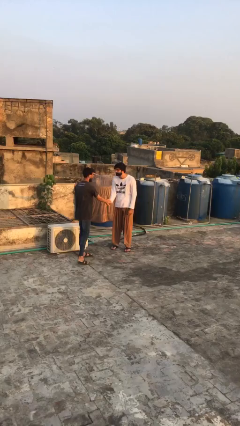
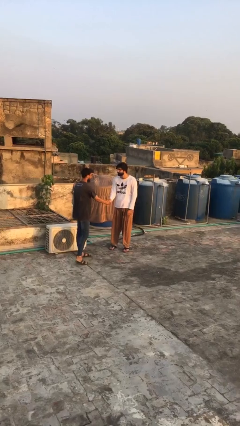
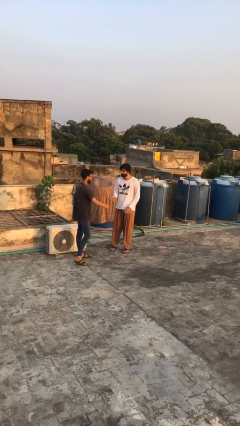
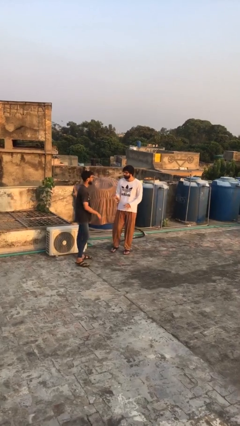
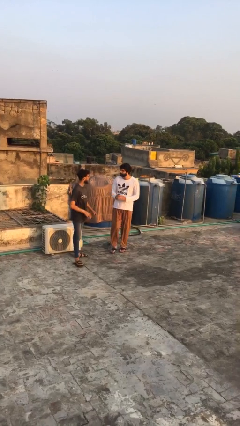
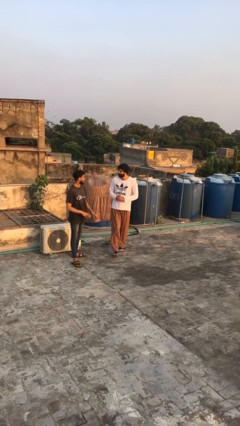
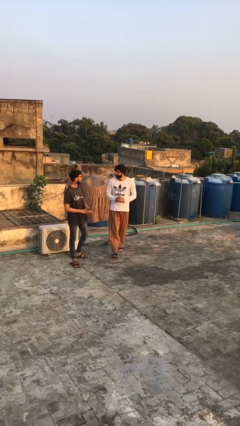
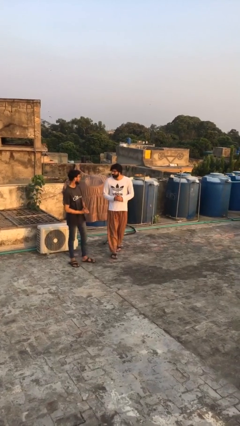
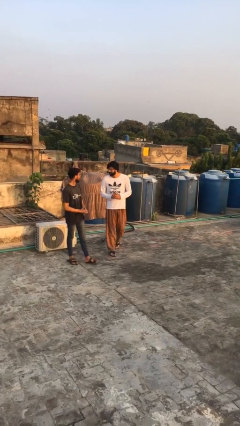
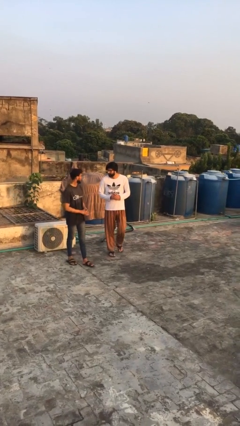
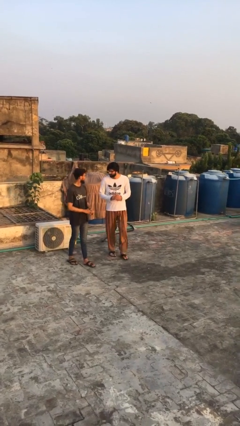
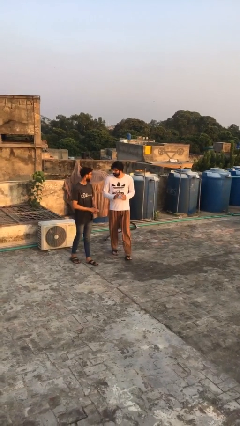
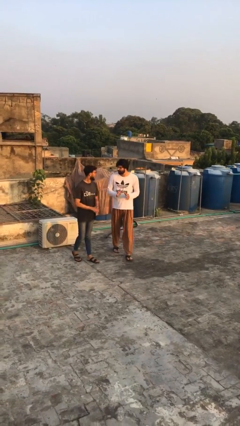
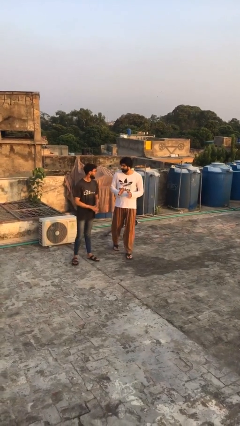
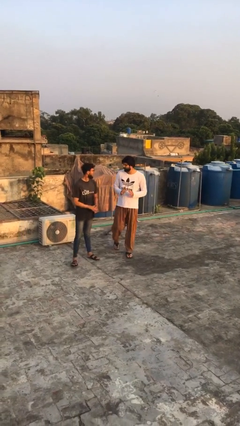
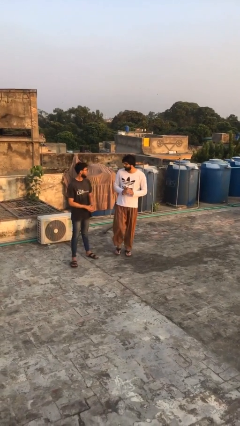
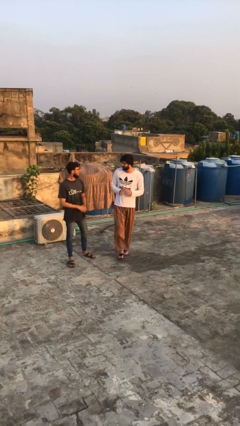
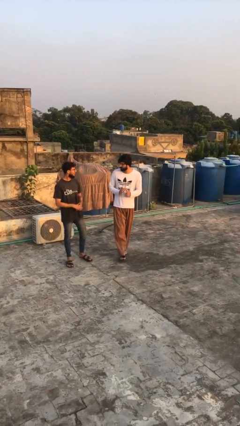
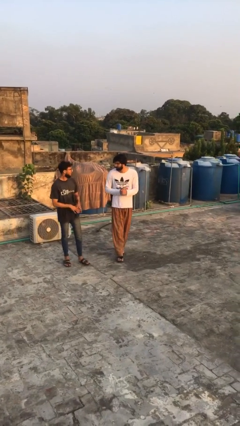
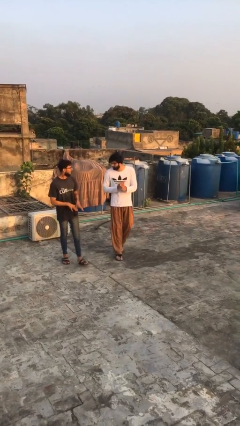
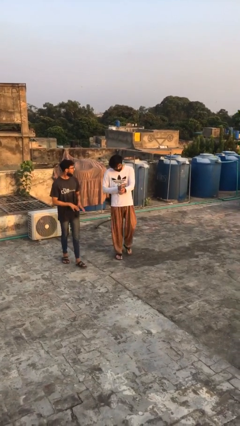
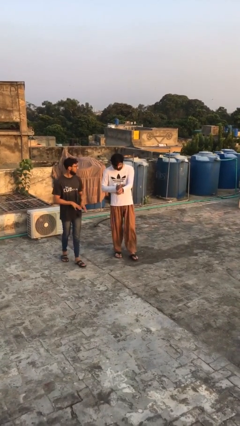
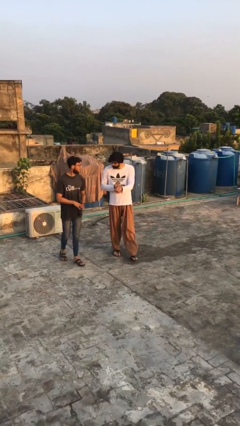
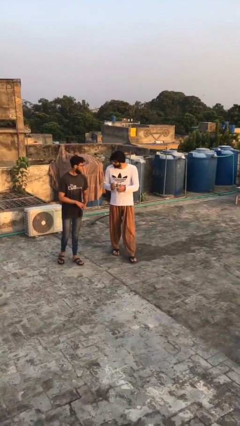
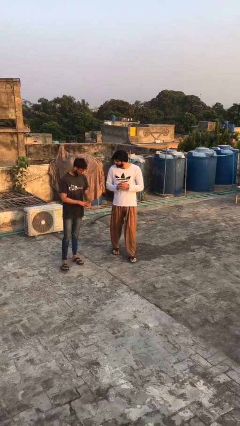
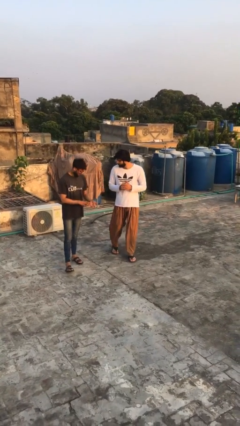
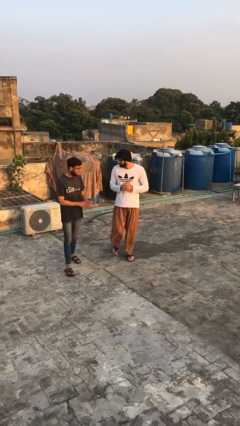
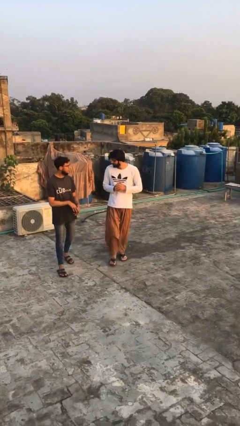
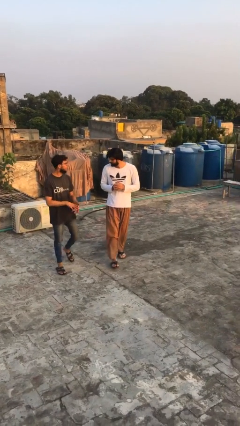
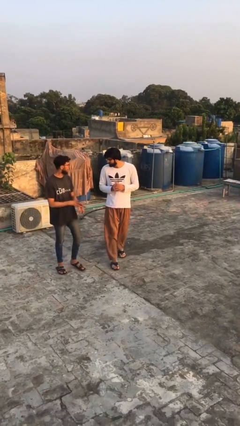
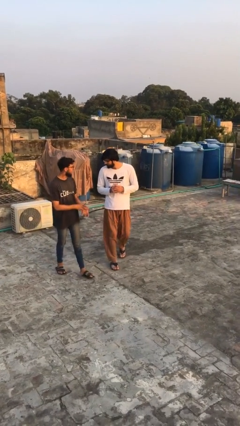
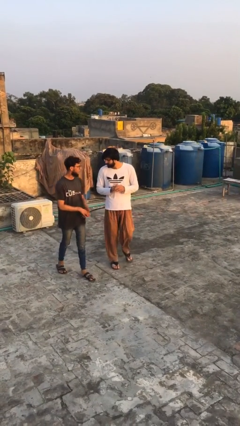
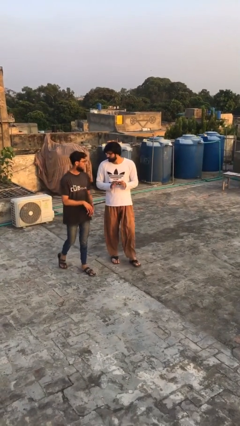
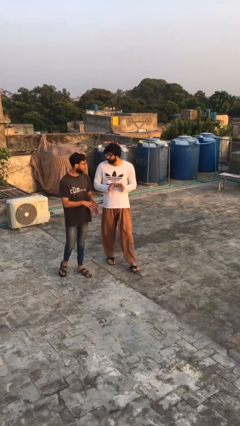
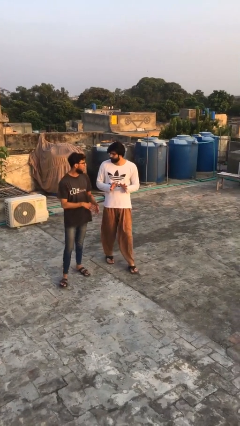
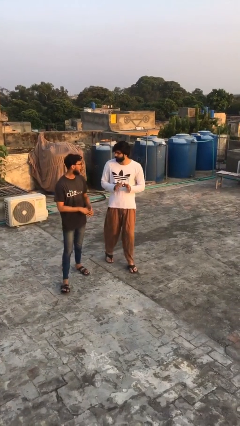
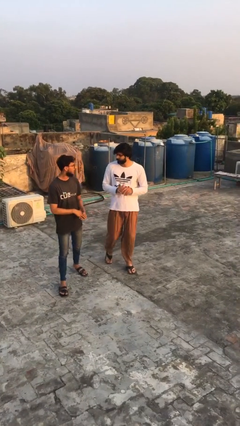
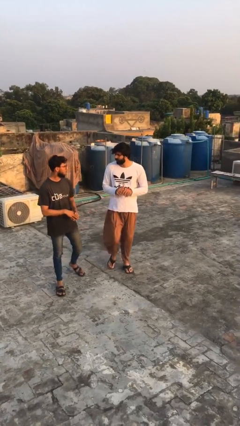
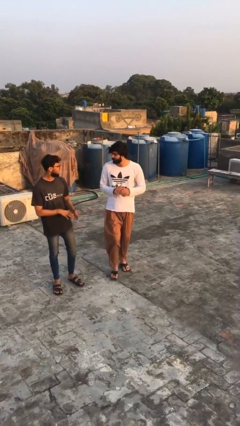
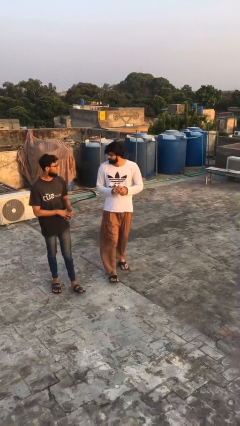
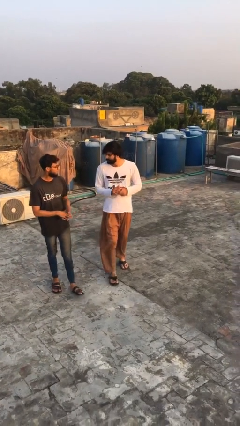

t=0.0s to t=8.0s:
person talks to person

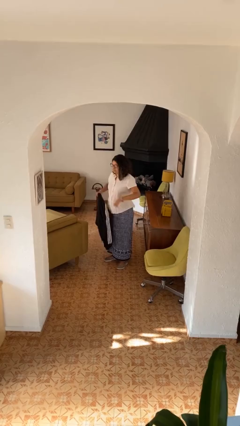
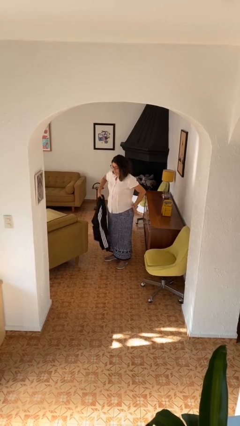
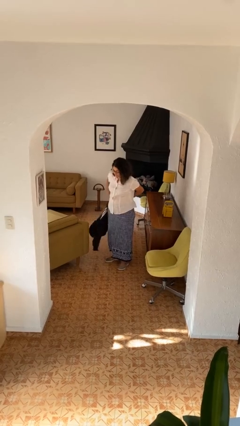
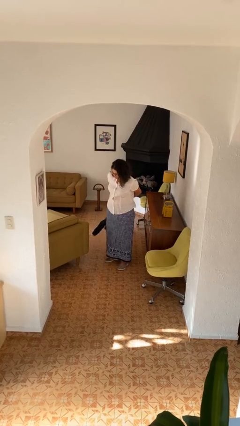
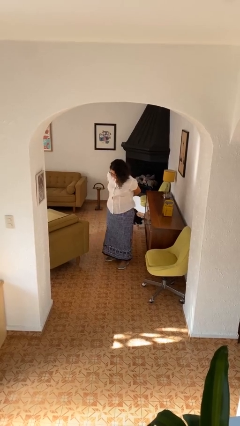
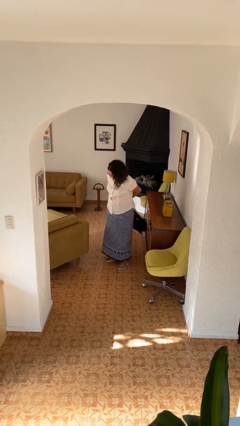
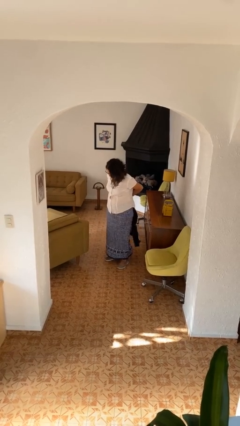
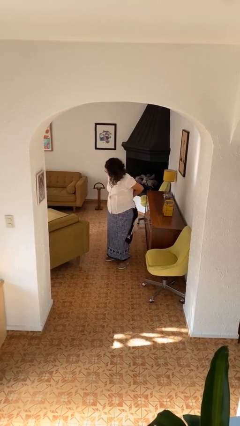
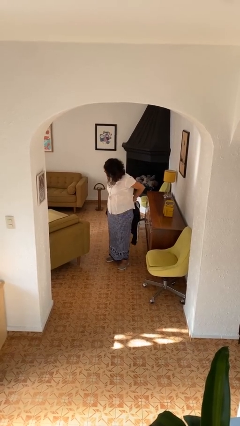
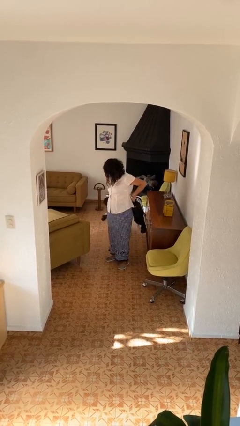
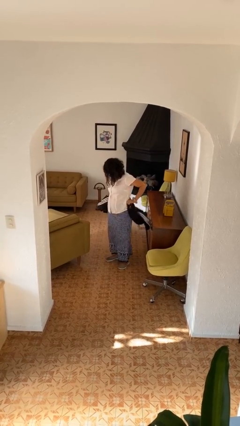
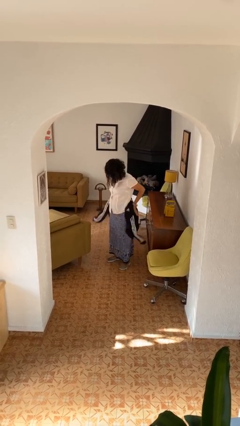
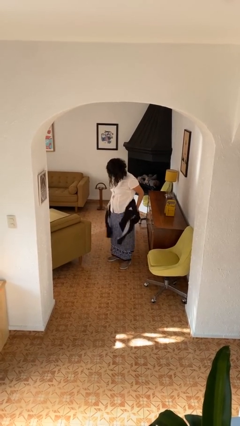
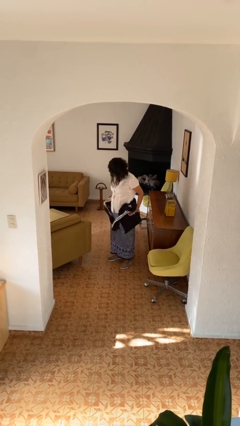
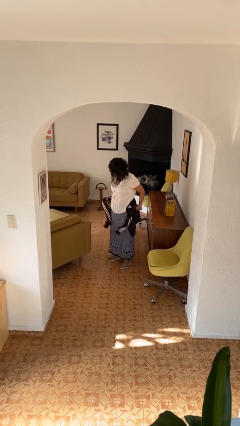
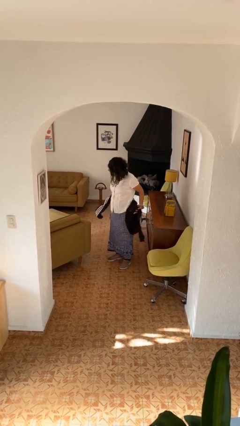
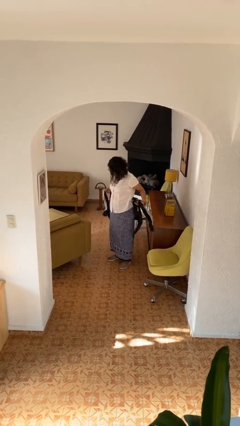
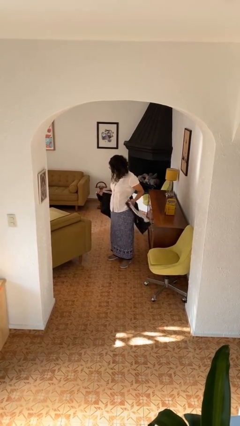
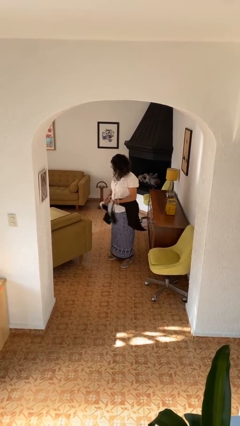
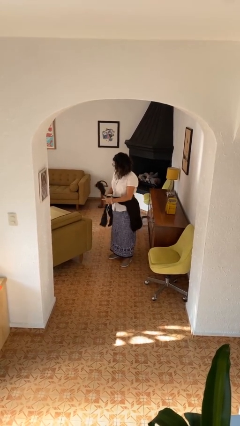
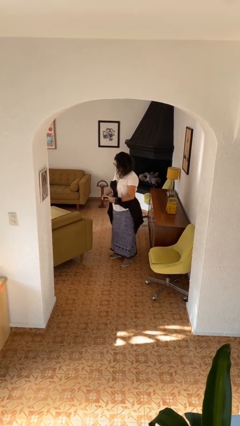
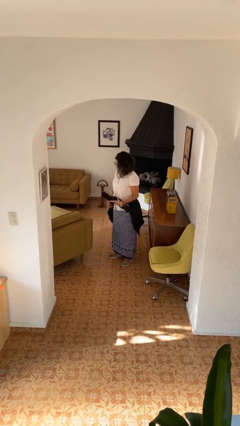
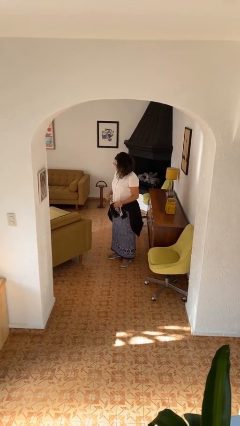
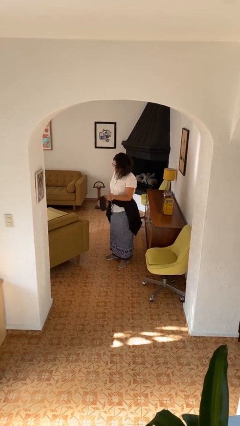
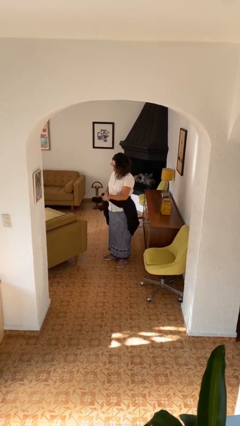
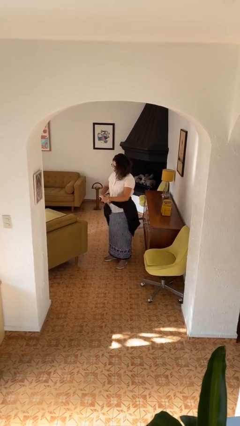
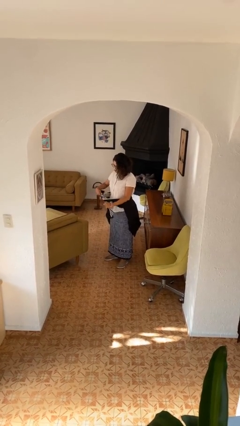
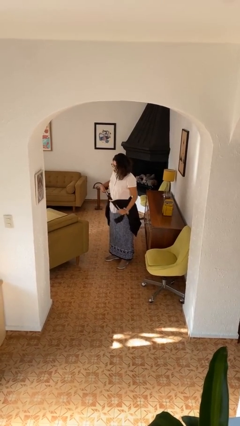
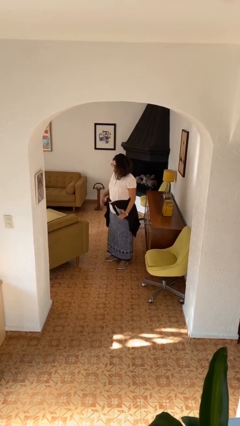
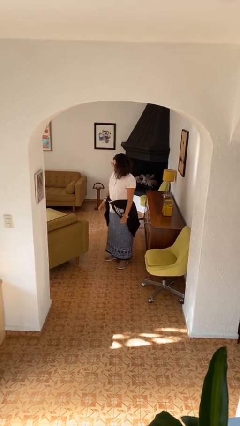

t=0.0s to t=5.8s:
person ties jacket around waist

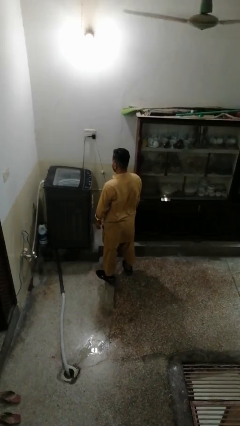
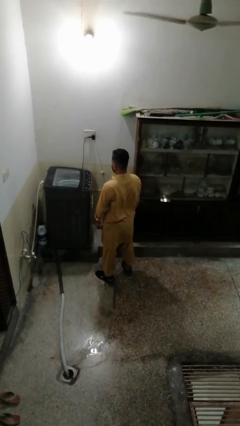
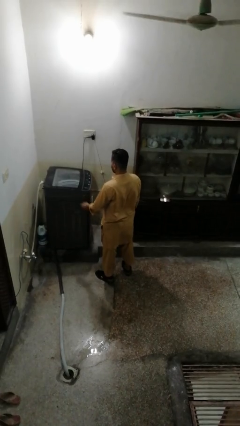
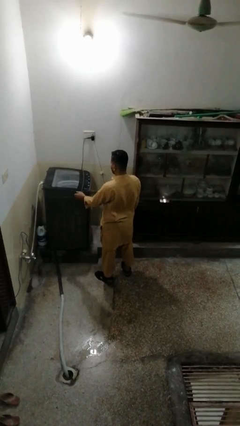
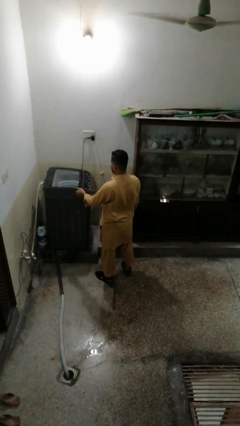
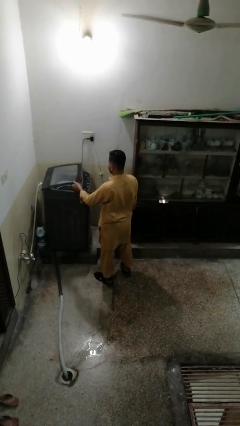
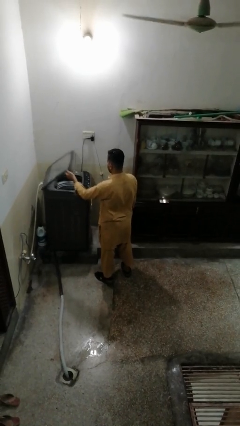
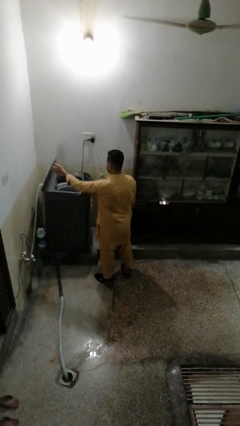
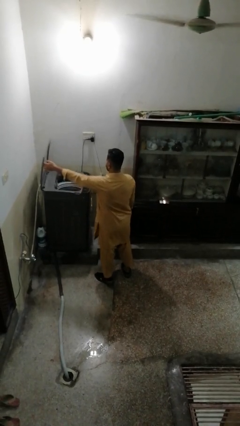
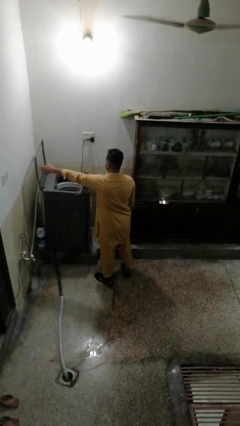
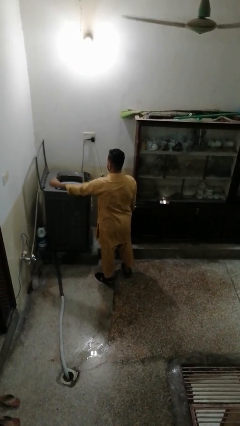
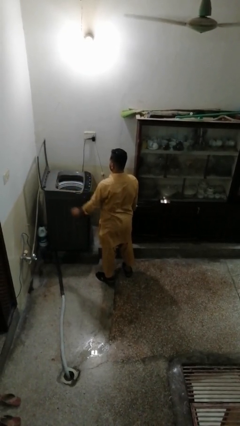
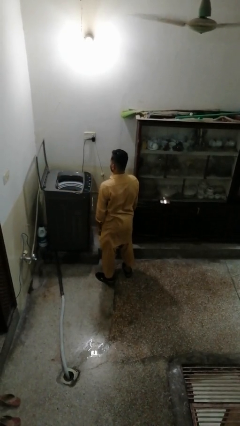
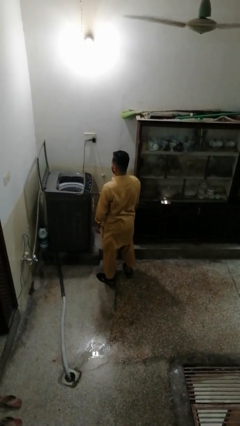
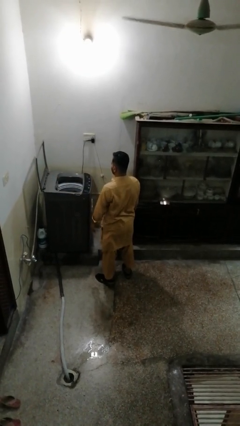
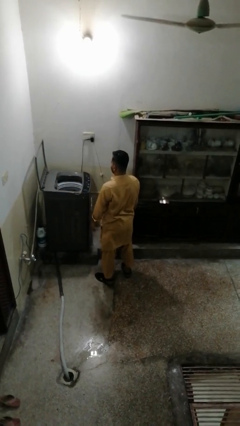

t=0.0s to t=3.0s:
person opens clothes washer

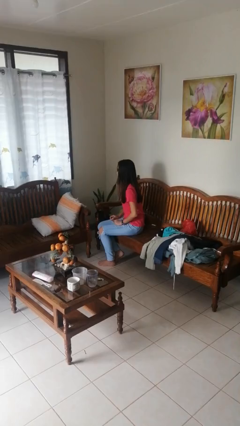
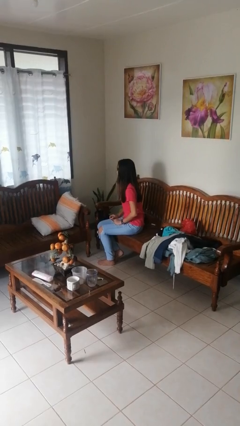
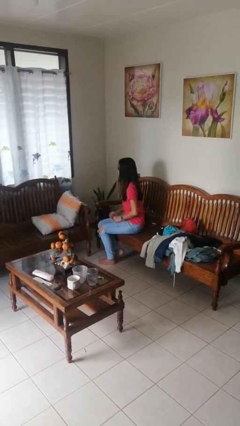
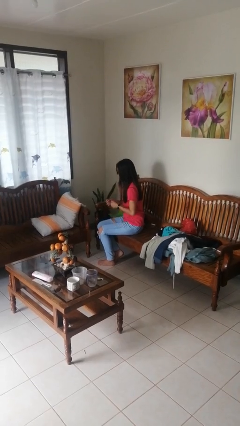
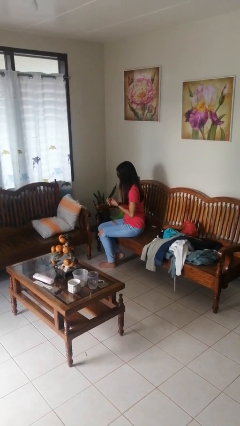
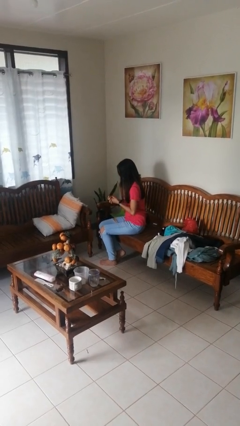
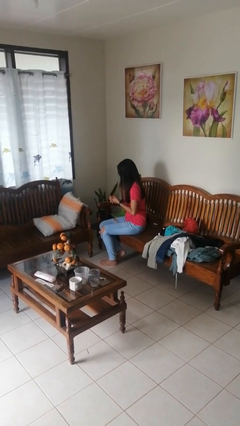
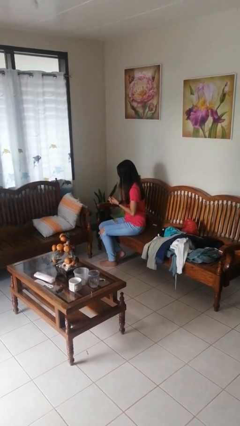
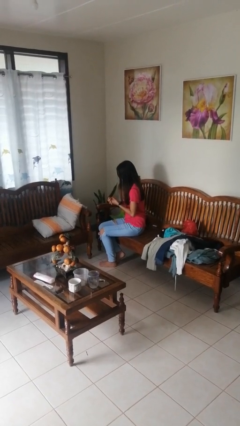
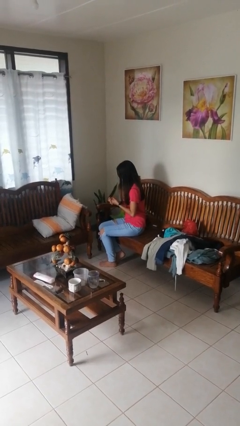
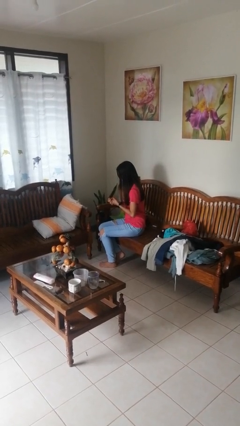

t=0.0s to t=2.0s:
person files fingernails
